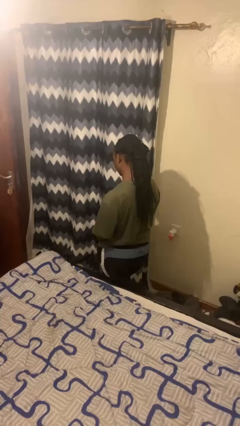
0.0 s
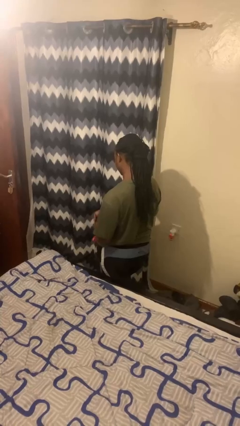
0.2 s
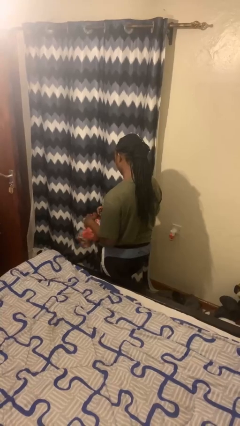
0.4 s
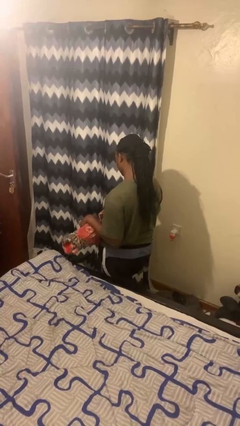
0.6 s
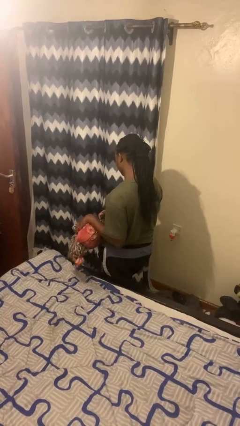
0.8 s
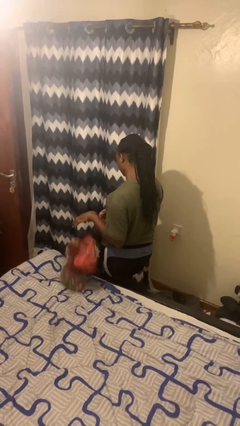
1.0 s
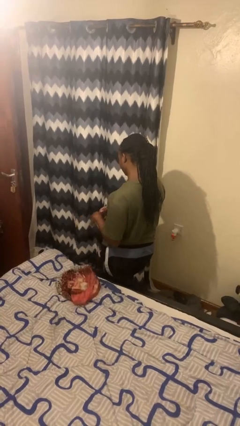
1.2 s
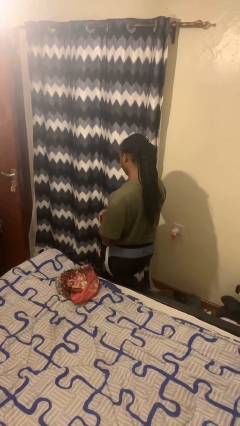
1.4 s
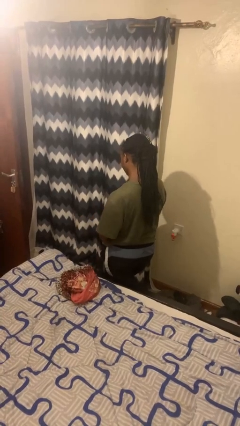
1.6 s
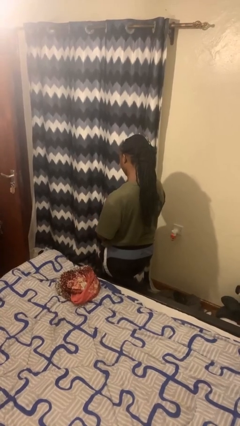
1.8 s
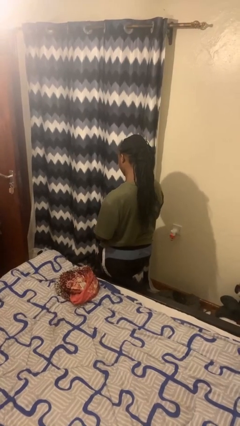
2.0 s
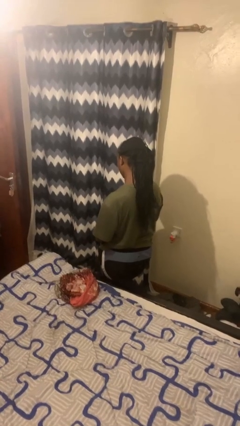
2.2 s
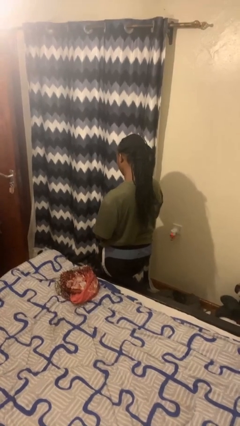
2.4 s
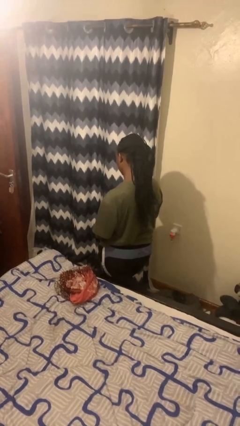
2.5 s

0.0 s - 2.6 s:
person throws object on bed

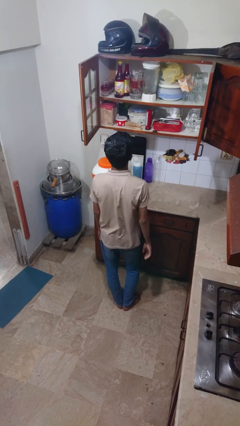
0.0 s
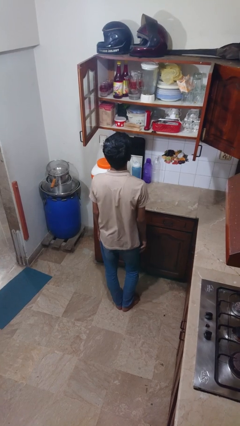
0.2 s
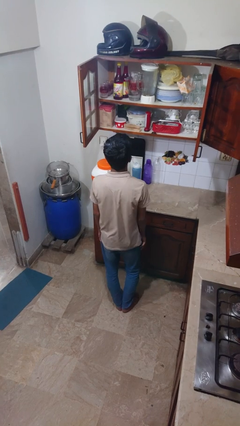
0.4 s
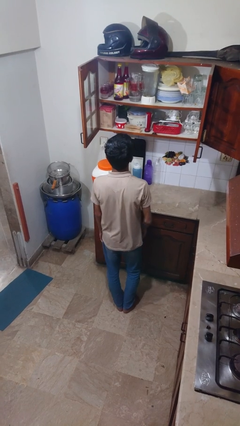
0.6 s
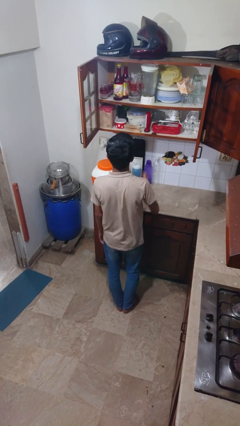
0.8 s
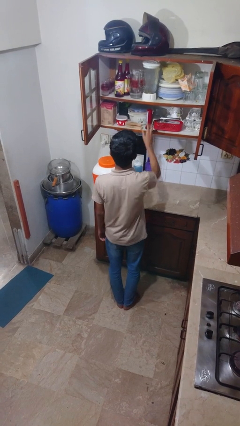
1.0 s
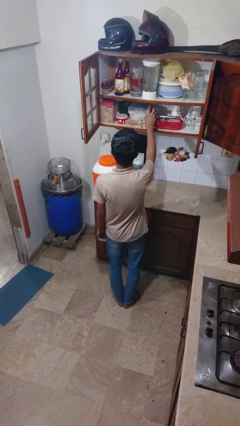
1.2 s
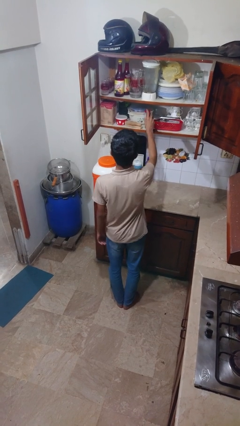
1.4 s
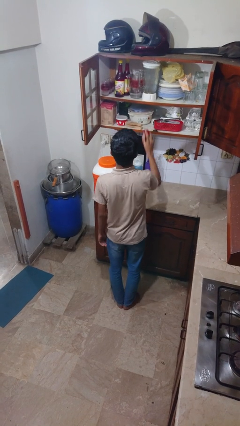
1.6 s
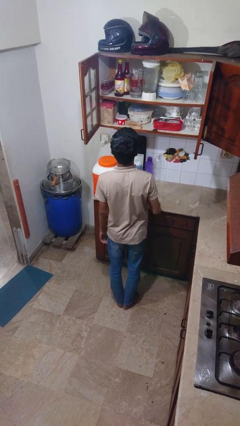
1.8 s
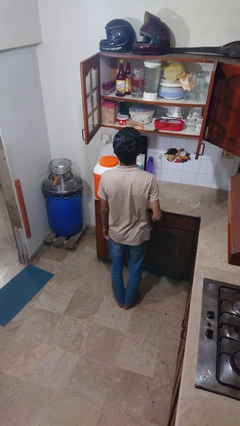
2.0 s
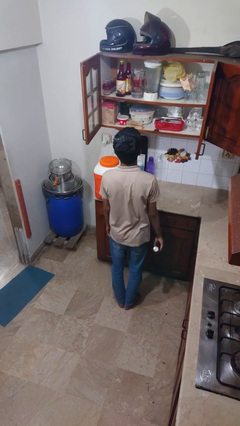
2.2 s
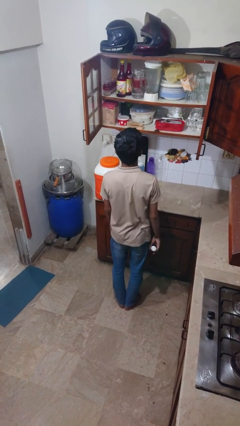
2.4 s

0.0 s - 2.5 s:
person picks up object from cabinet

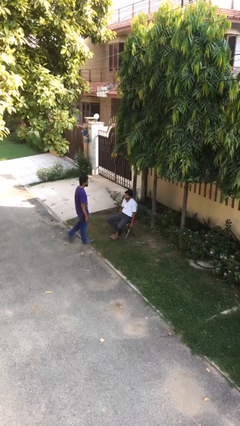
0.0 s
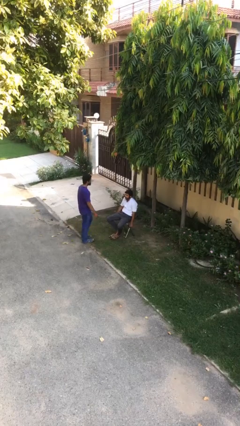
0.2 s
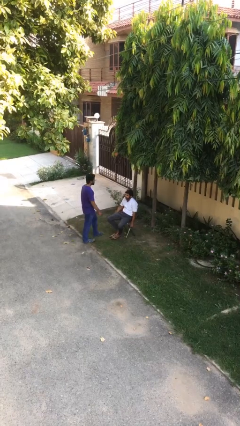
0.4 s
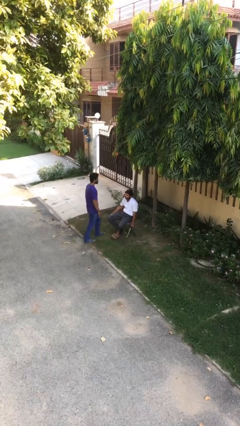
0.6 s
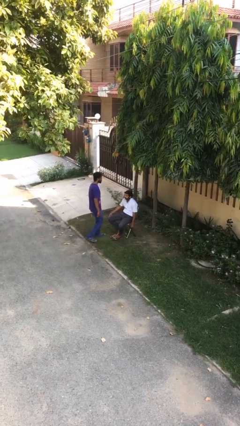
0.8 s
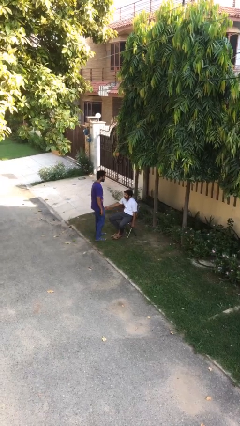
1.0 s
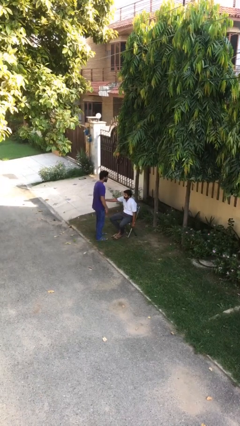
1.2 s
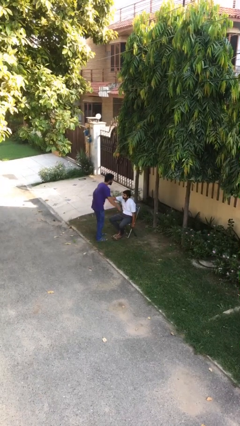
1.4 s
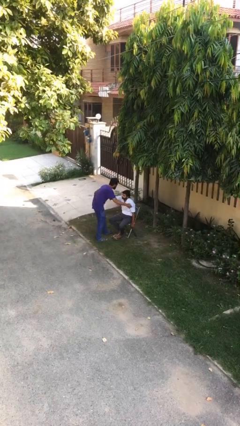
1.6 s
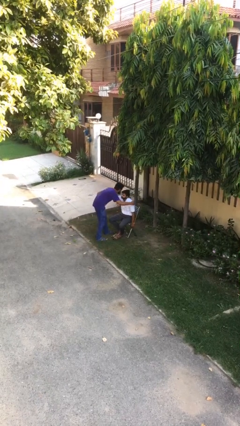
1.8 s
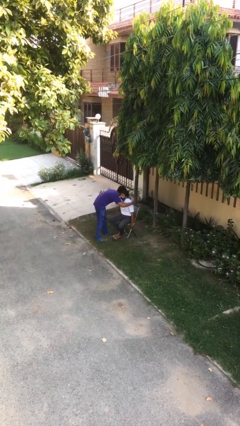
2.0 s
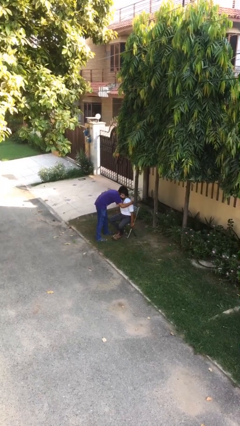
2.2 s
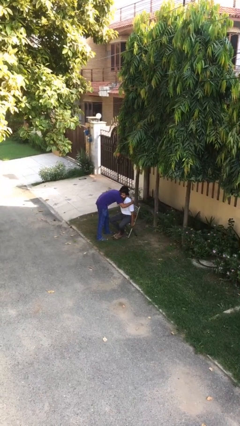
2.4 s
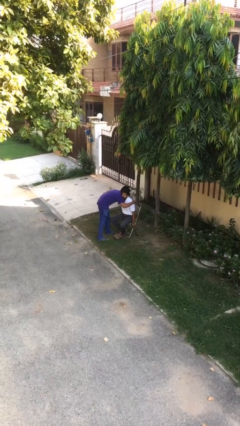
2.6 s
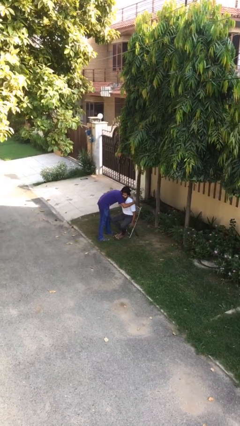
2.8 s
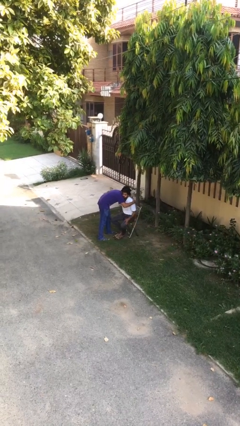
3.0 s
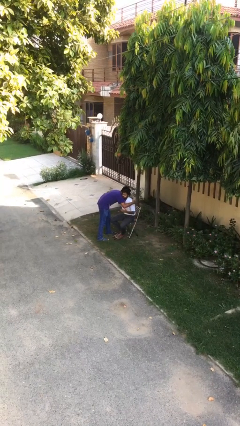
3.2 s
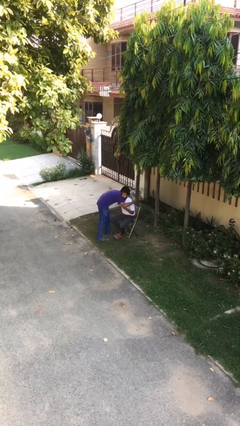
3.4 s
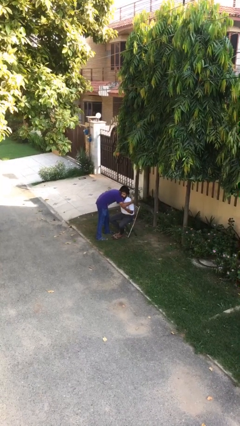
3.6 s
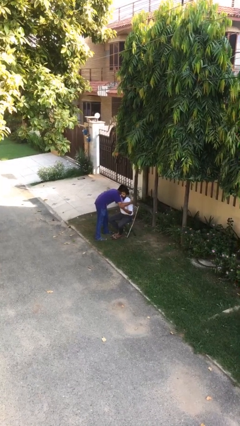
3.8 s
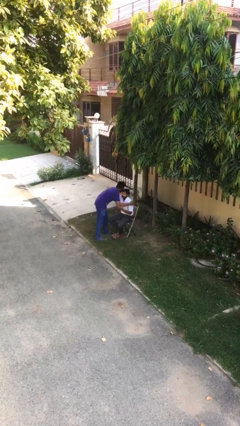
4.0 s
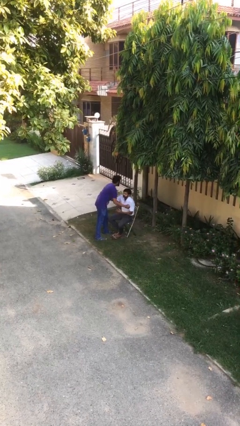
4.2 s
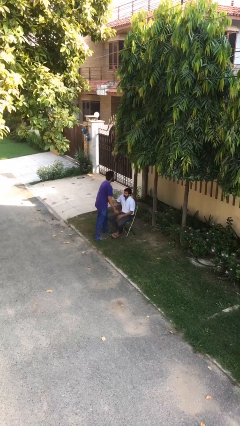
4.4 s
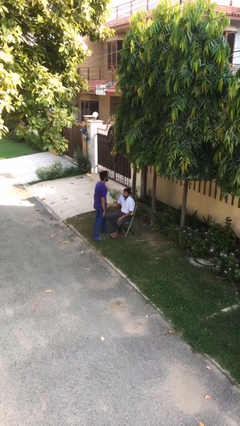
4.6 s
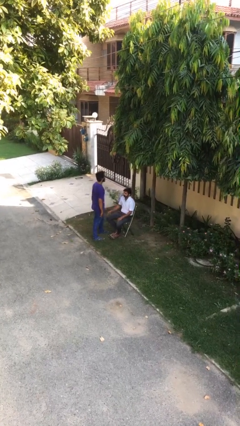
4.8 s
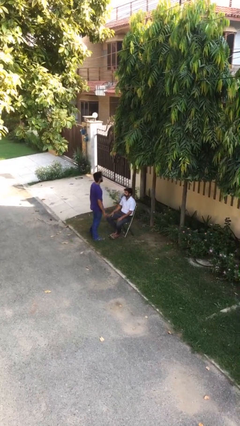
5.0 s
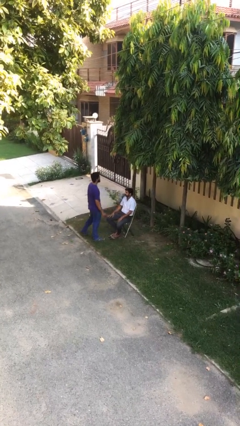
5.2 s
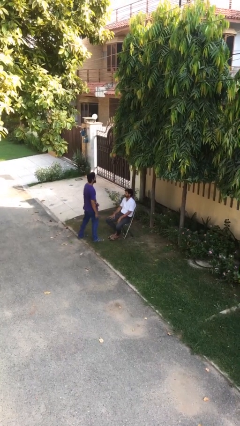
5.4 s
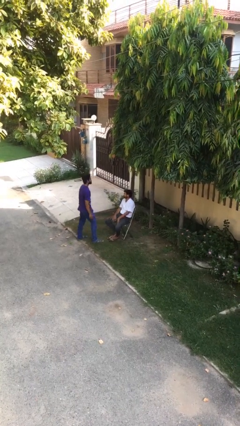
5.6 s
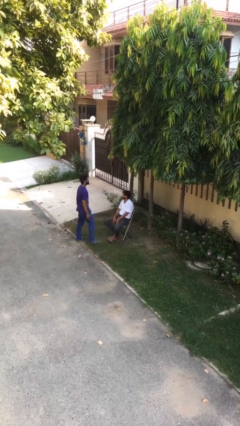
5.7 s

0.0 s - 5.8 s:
person embraces person

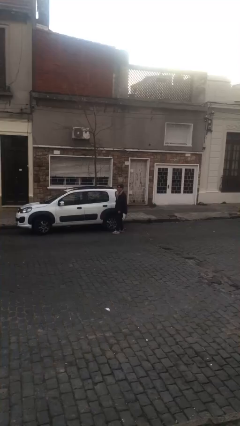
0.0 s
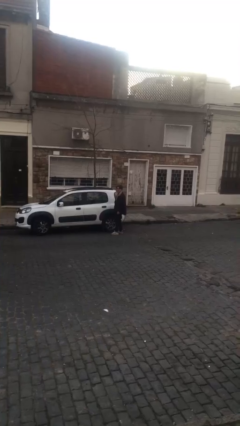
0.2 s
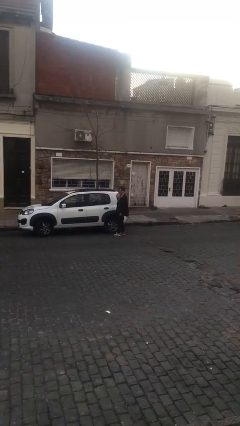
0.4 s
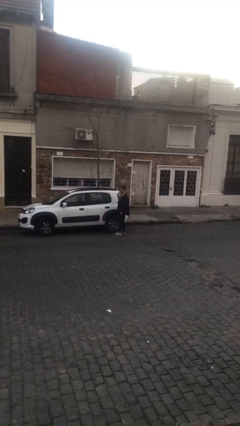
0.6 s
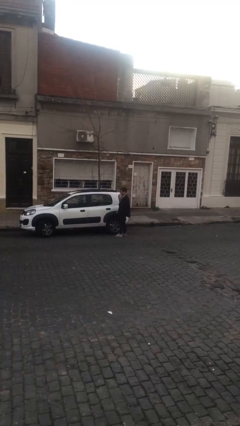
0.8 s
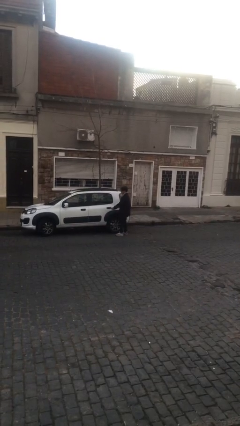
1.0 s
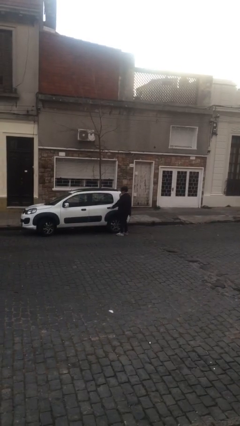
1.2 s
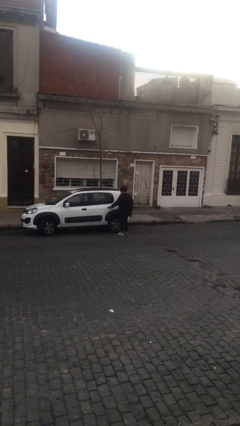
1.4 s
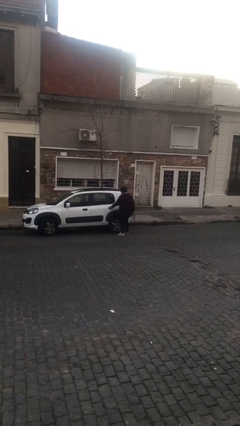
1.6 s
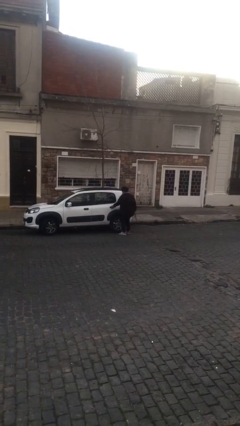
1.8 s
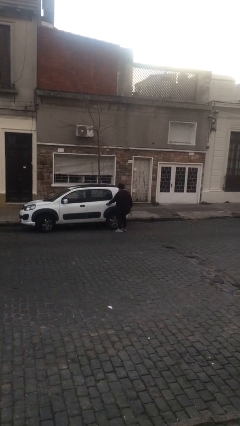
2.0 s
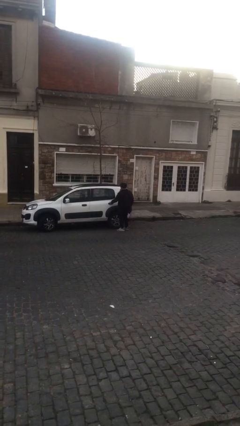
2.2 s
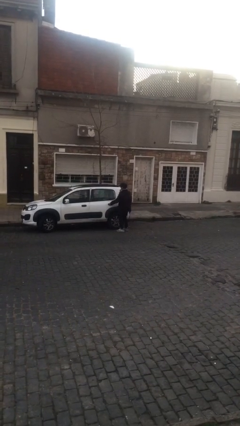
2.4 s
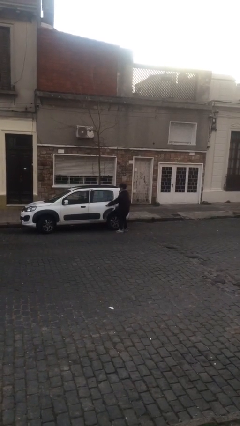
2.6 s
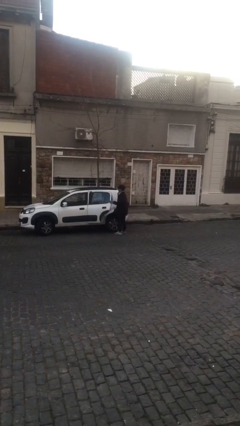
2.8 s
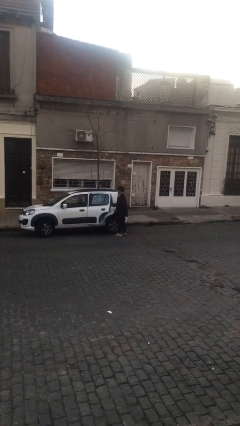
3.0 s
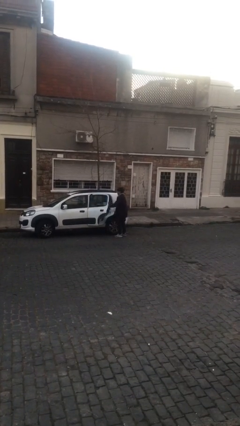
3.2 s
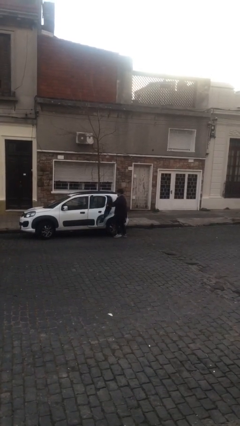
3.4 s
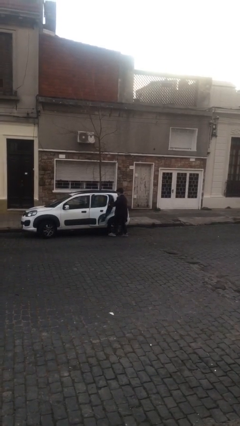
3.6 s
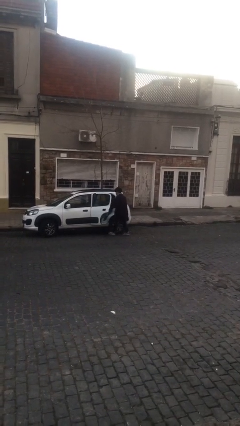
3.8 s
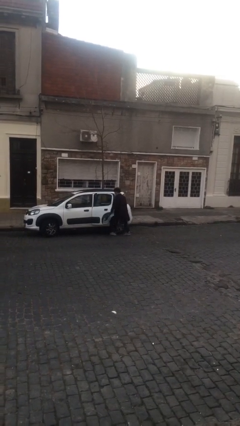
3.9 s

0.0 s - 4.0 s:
person opens car door

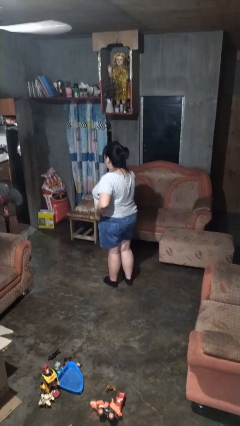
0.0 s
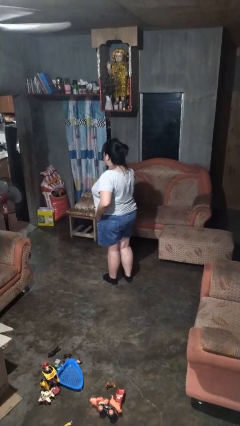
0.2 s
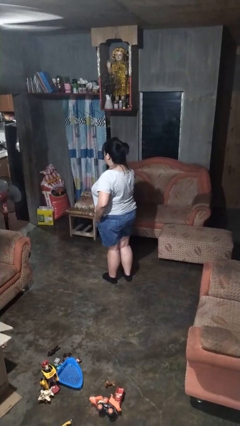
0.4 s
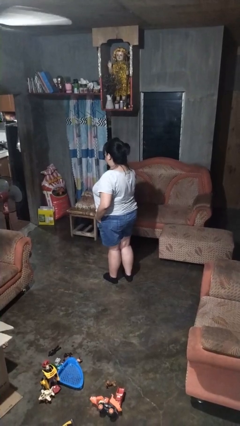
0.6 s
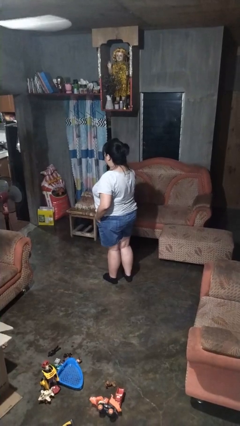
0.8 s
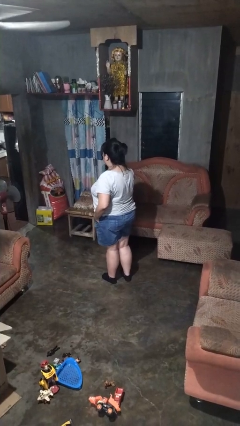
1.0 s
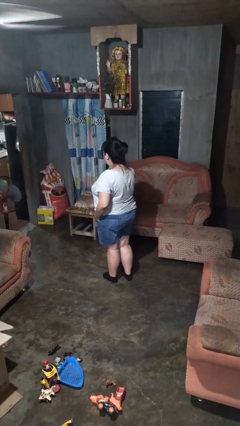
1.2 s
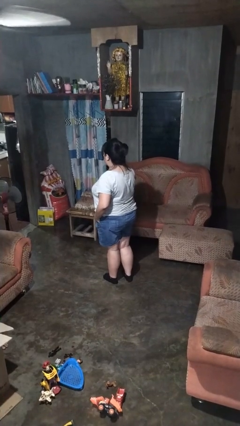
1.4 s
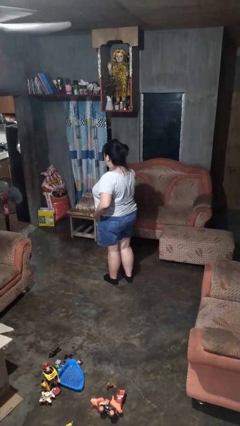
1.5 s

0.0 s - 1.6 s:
person puts hands in back pockets

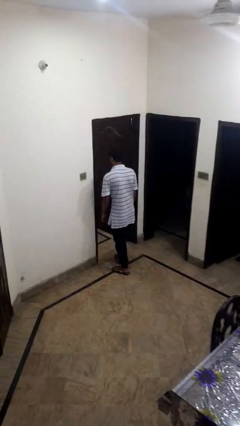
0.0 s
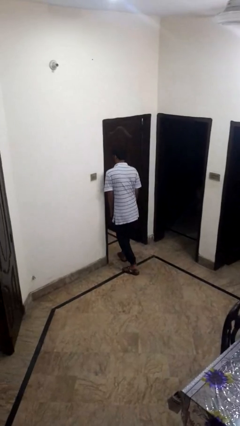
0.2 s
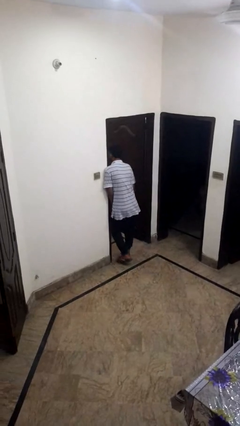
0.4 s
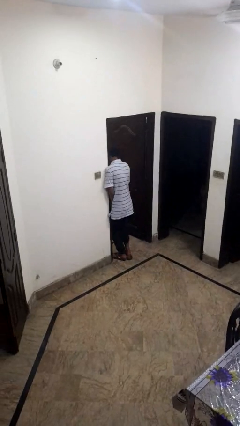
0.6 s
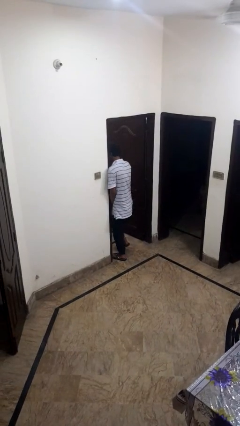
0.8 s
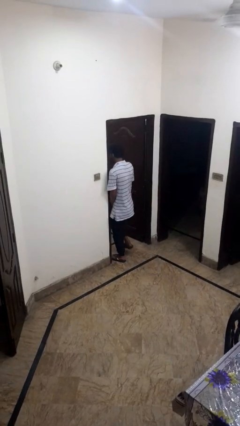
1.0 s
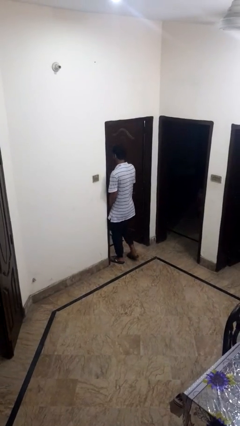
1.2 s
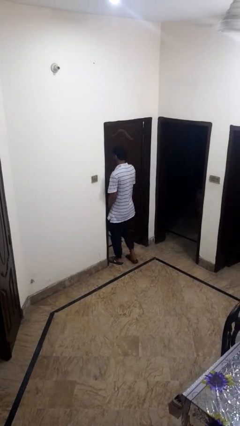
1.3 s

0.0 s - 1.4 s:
person bumps into wall
